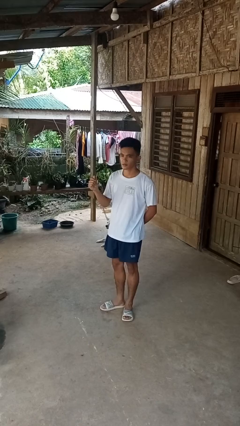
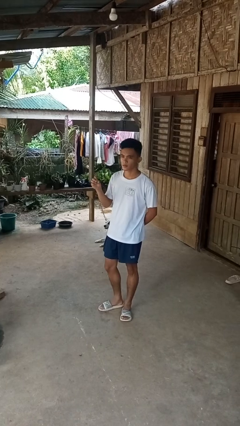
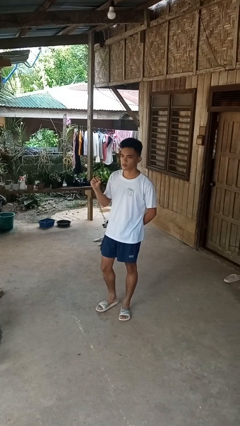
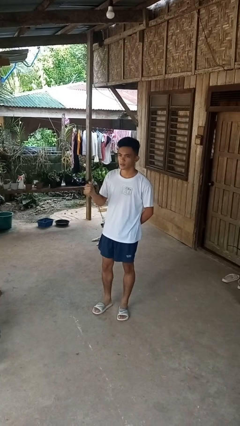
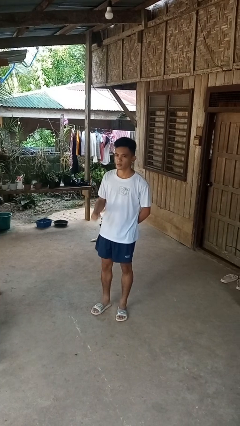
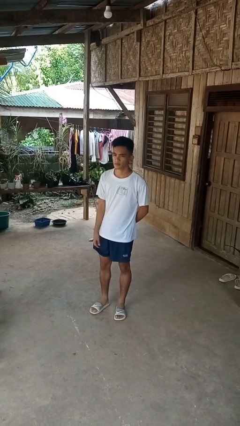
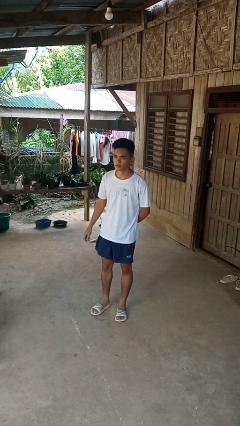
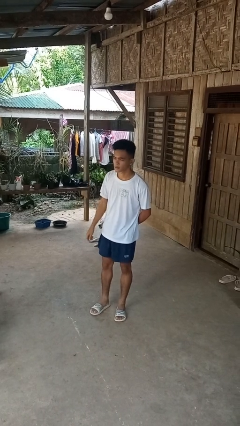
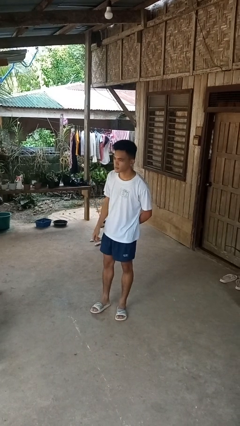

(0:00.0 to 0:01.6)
person snaps fingers

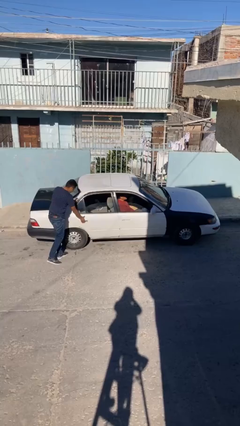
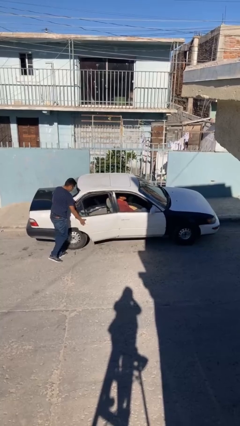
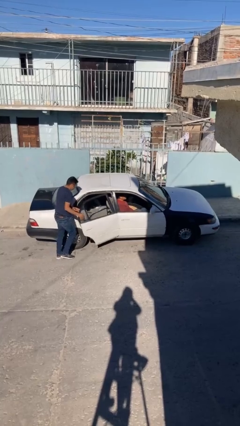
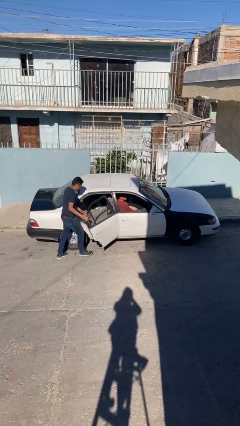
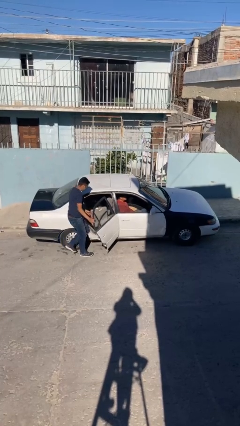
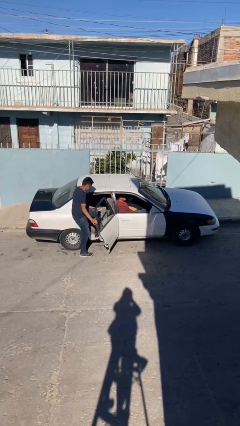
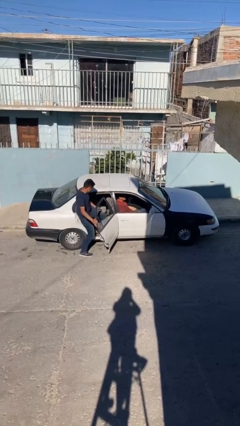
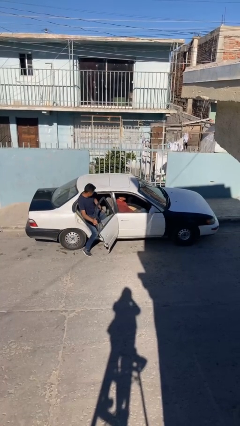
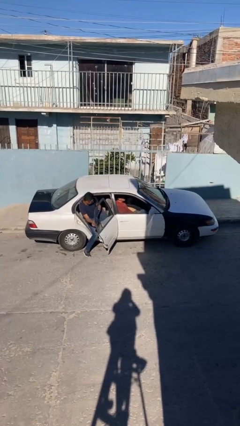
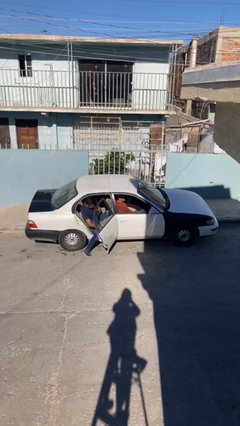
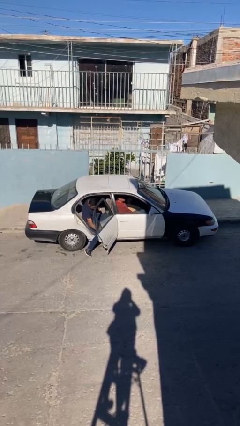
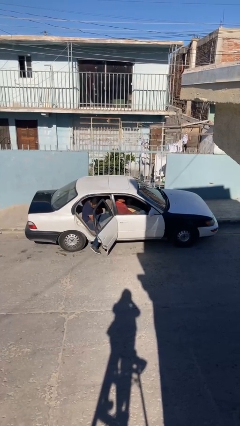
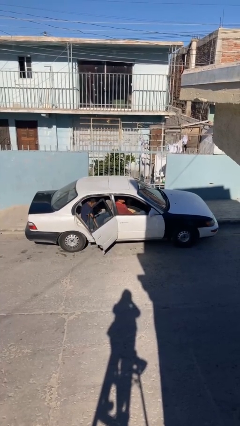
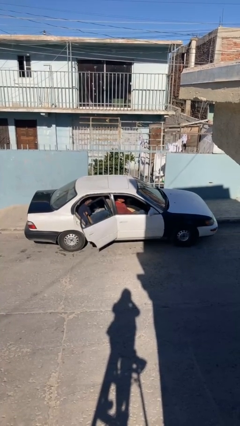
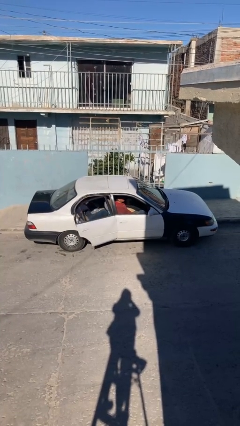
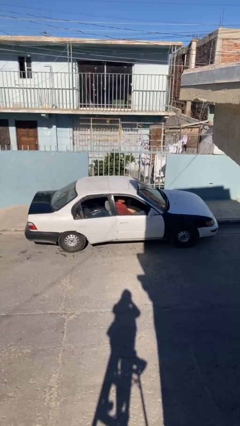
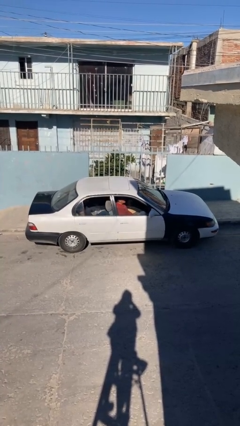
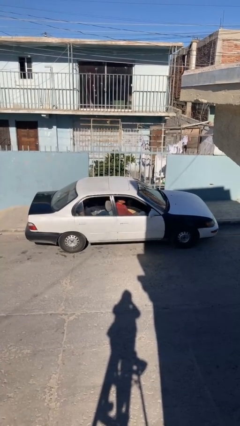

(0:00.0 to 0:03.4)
car picks up person

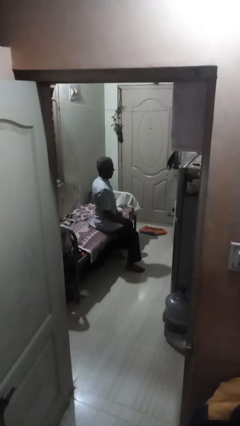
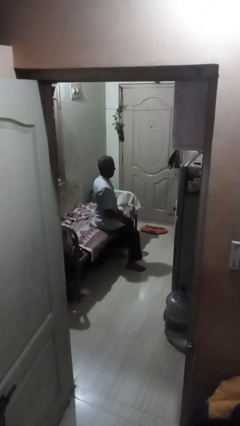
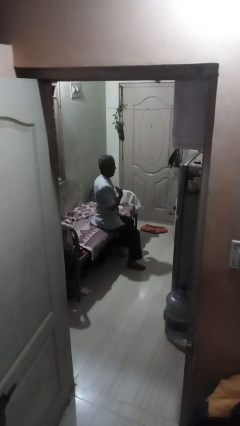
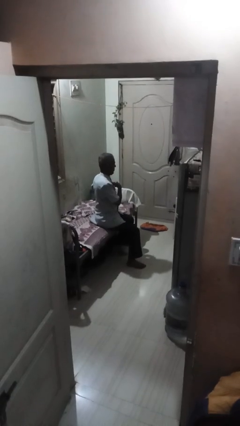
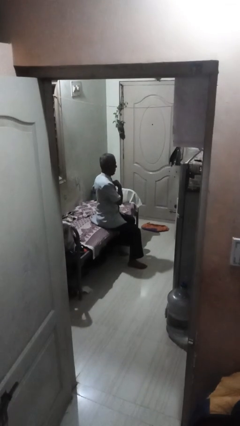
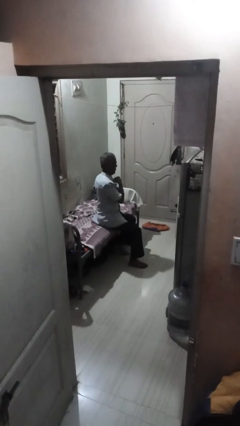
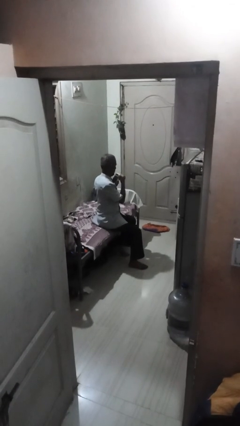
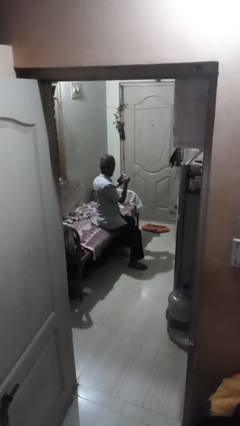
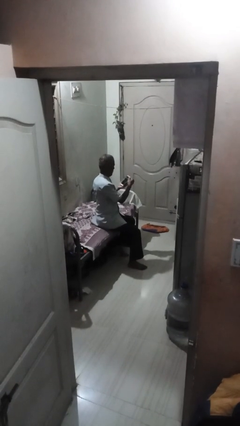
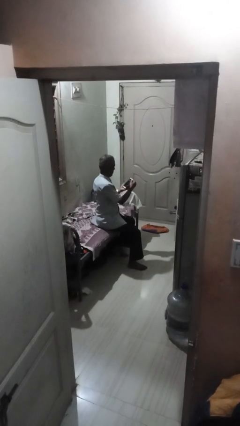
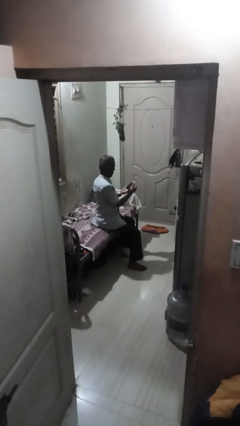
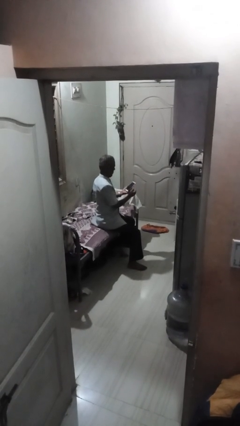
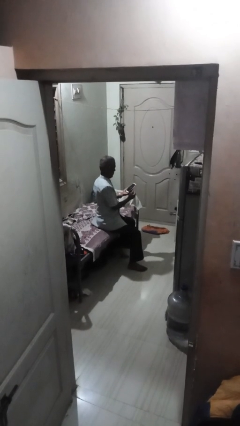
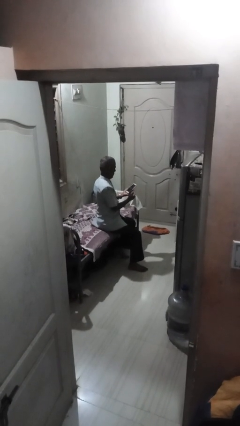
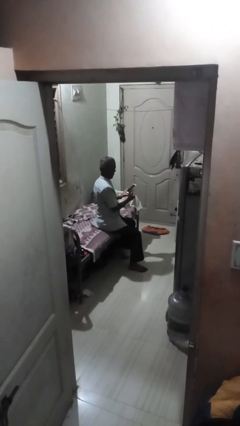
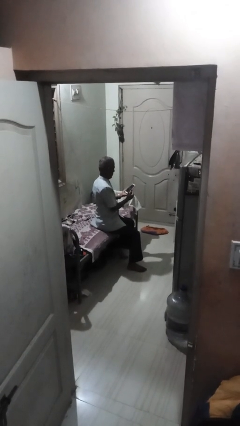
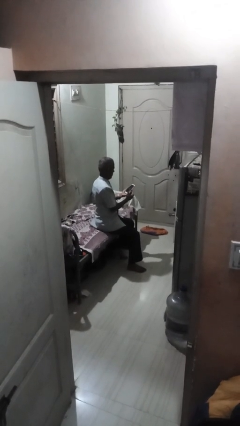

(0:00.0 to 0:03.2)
person takes phone from pocket

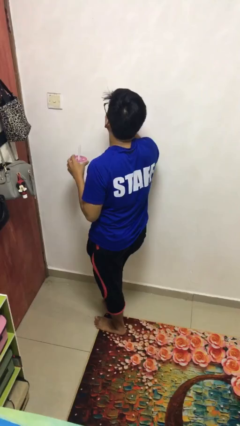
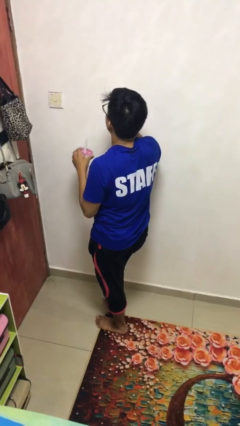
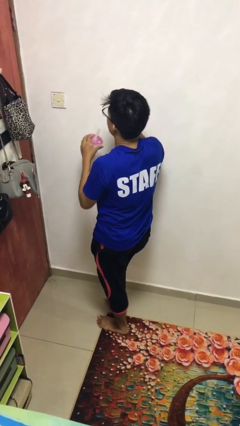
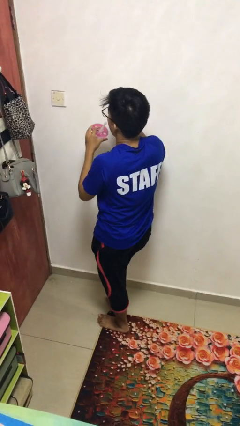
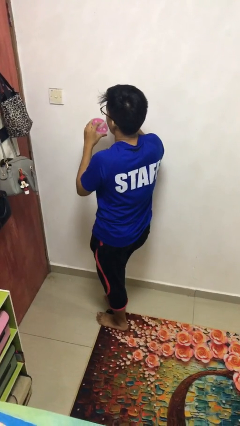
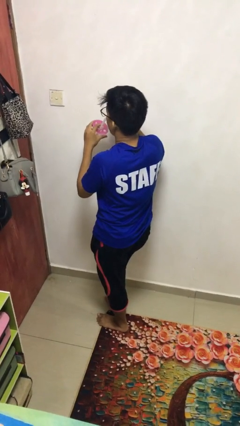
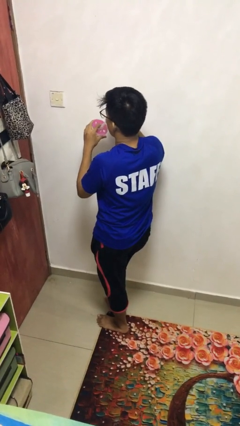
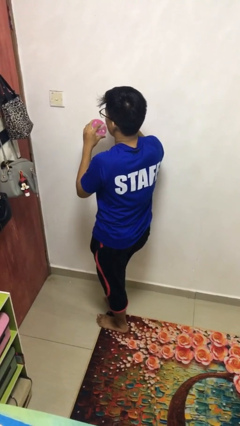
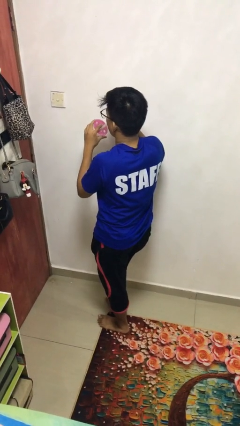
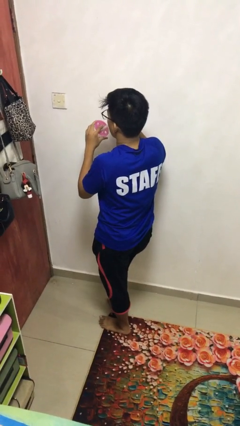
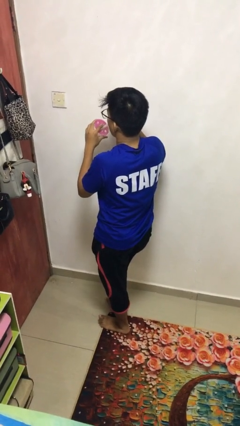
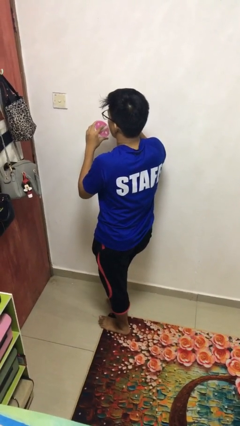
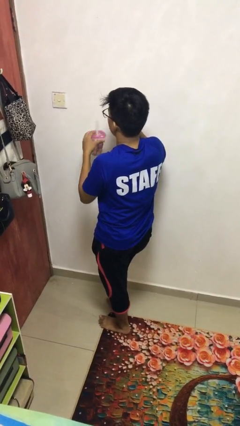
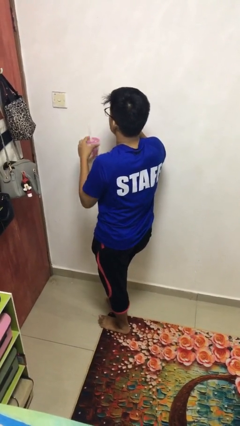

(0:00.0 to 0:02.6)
person drinks from straw

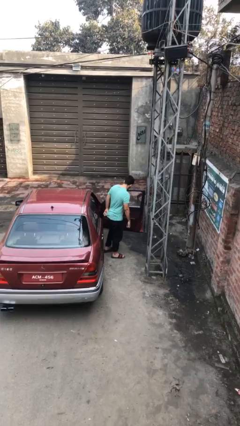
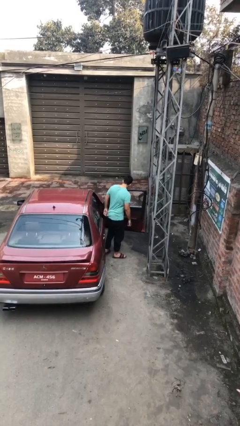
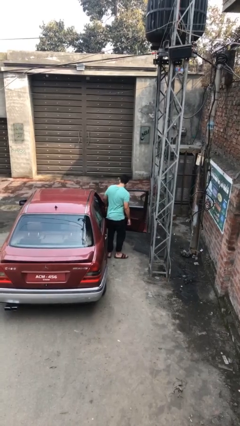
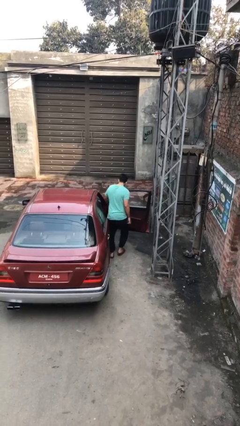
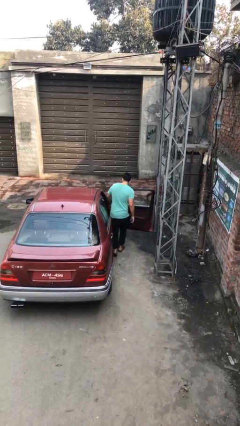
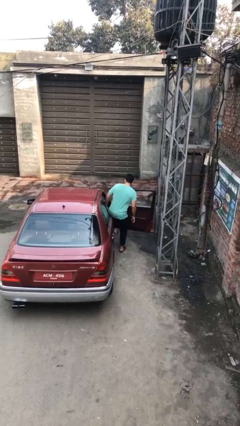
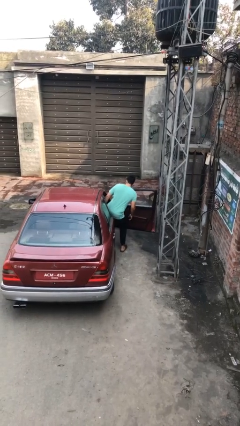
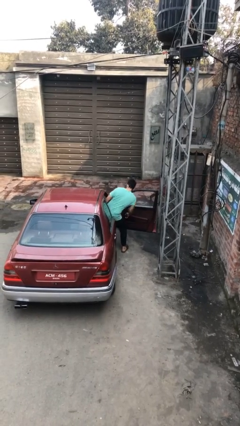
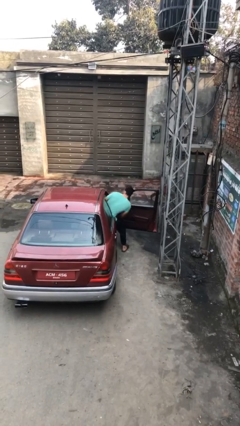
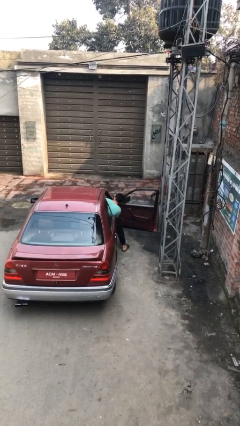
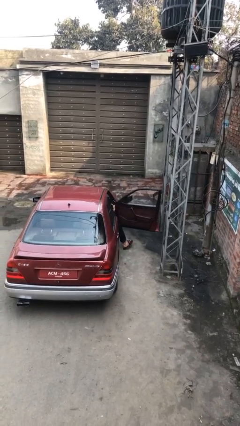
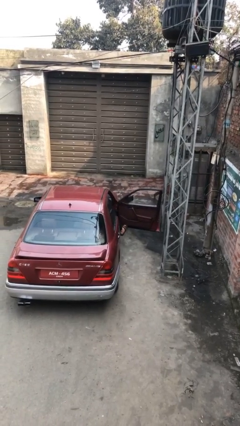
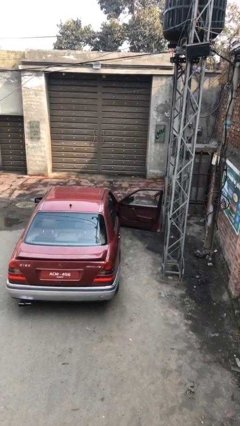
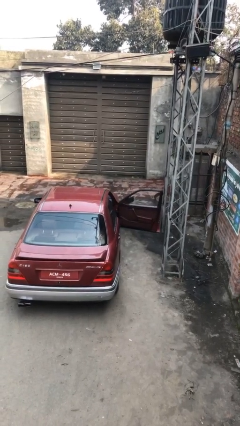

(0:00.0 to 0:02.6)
person enters car

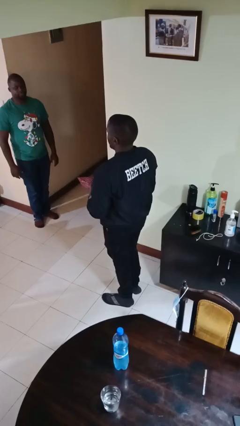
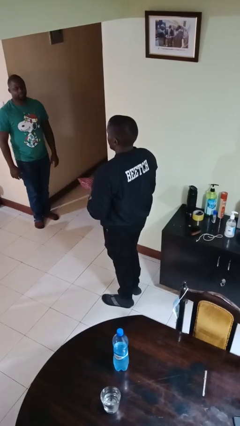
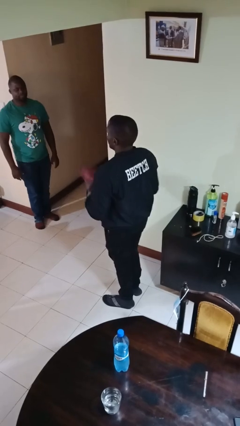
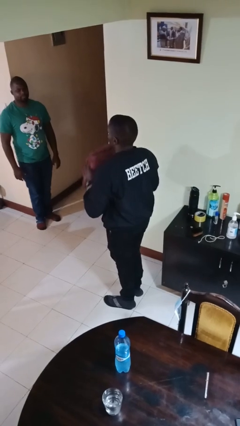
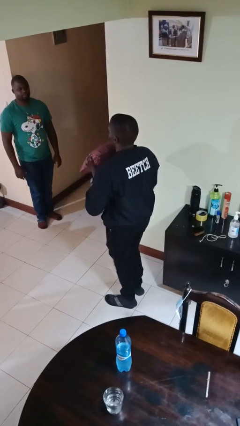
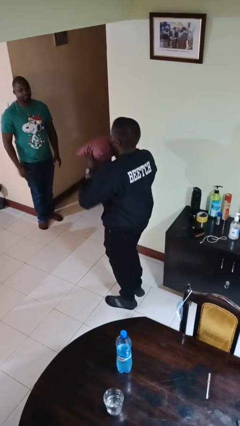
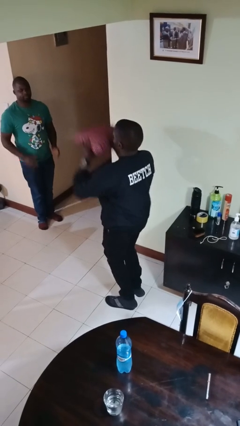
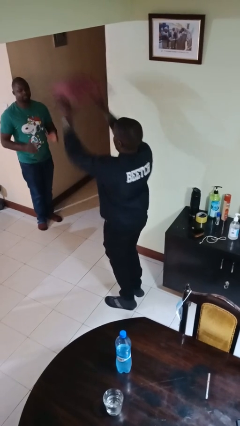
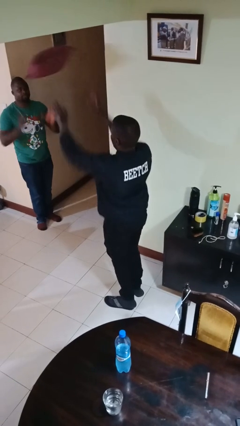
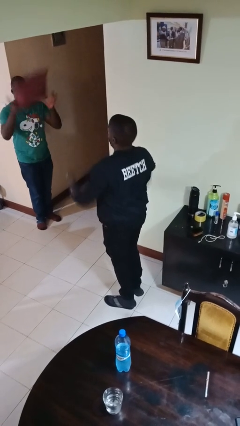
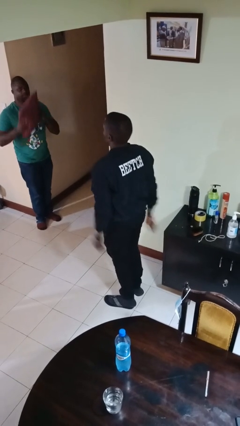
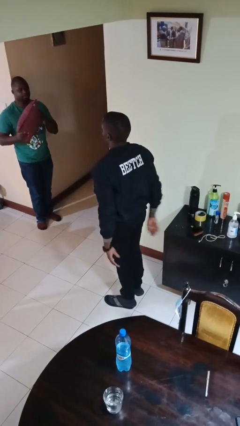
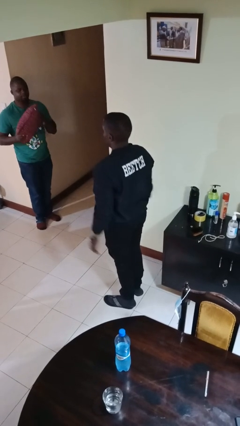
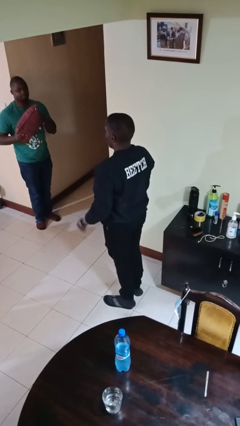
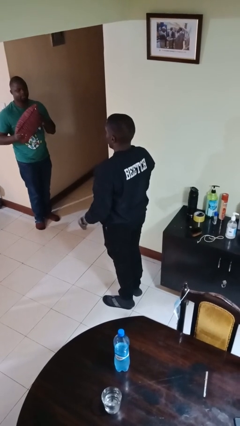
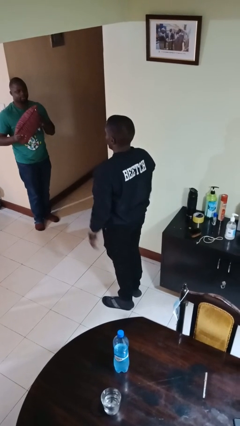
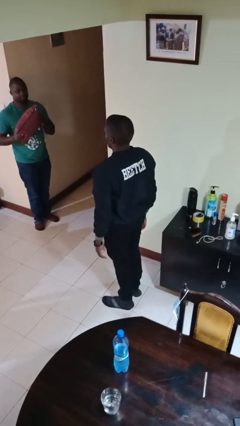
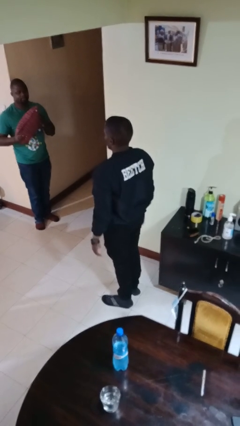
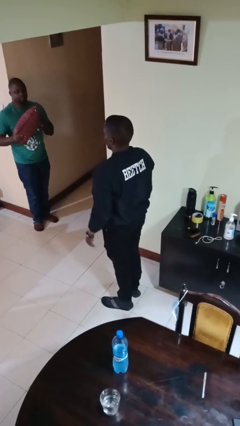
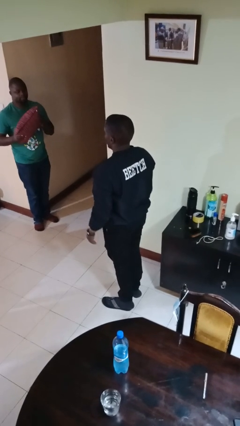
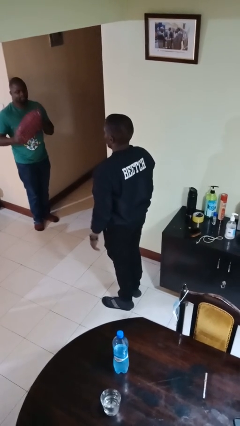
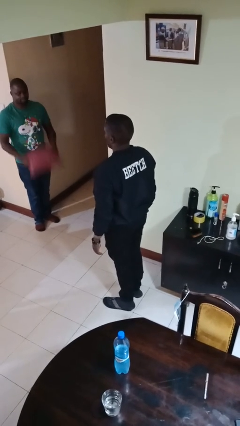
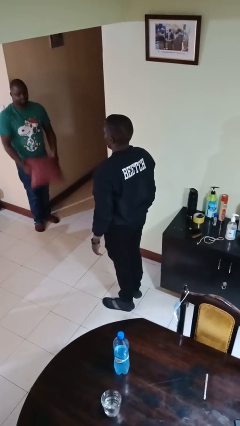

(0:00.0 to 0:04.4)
person throws object to person
